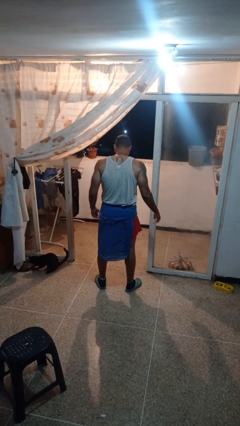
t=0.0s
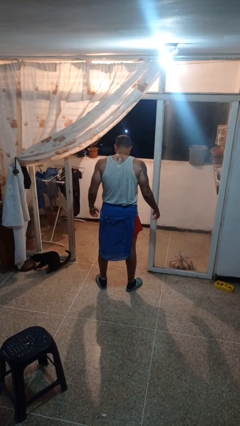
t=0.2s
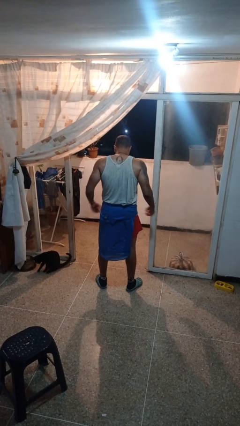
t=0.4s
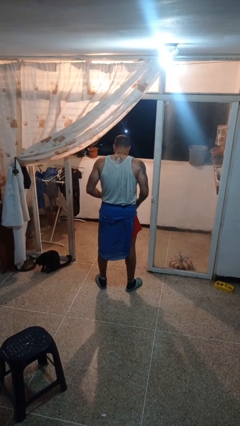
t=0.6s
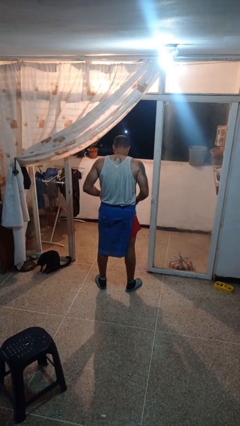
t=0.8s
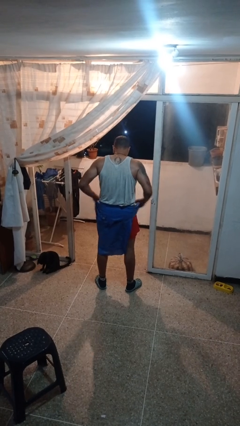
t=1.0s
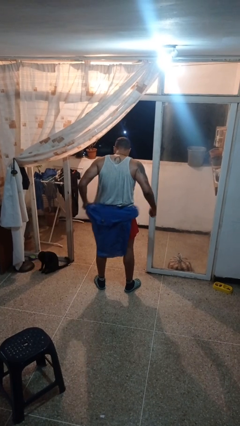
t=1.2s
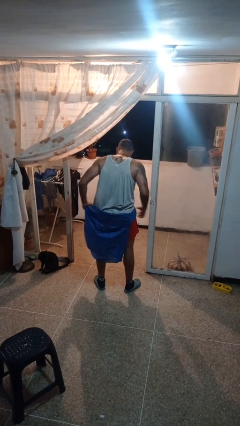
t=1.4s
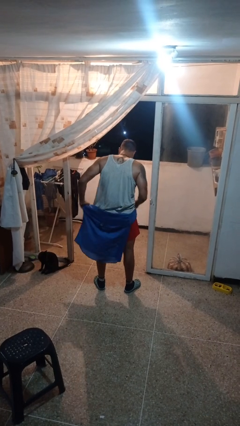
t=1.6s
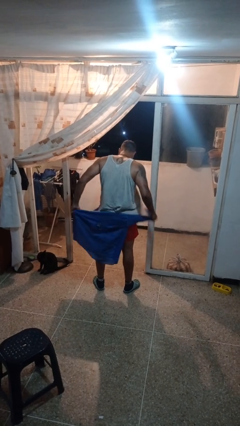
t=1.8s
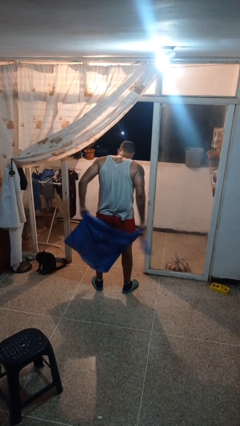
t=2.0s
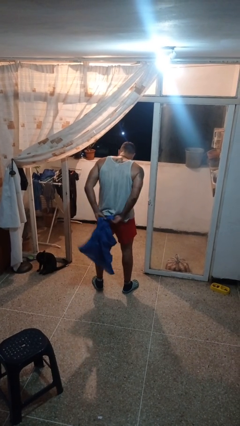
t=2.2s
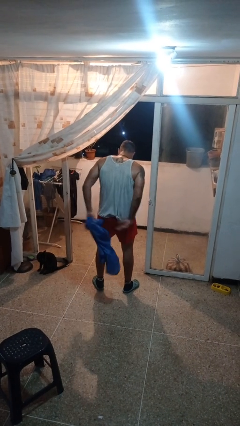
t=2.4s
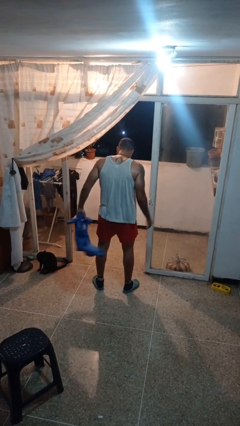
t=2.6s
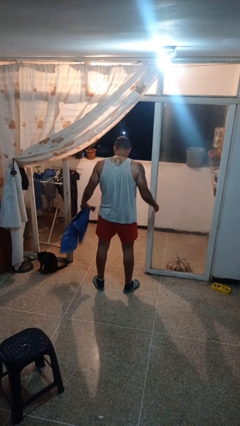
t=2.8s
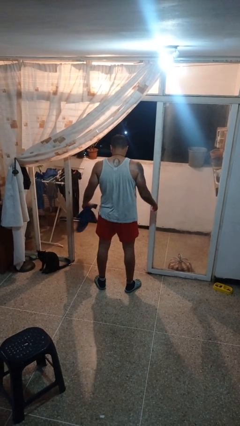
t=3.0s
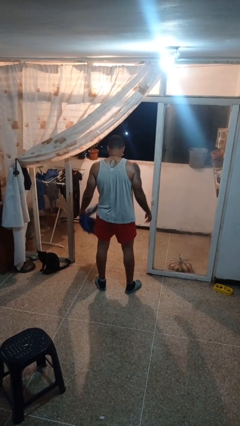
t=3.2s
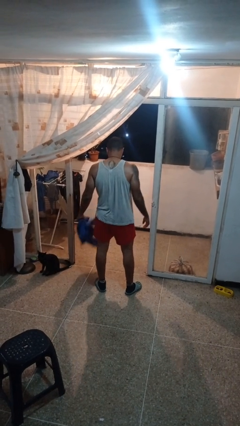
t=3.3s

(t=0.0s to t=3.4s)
person unties jacket around waist

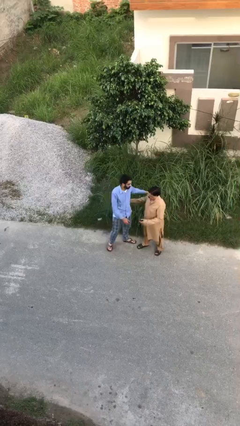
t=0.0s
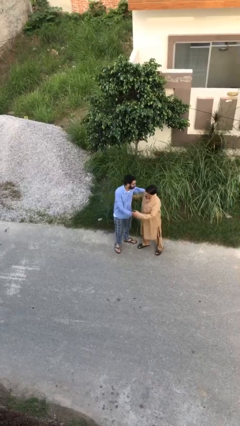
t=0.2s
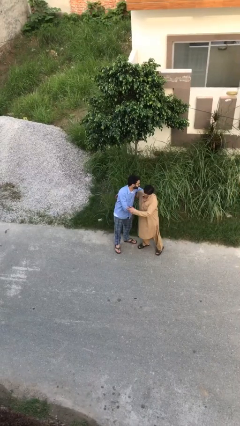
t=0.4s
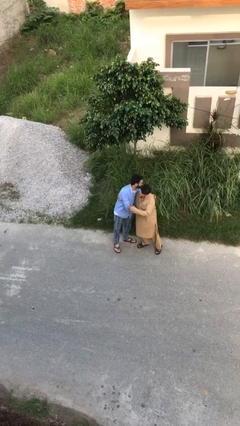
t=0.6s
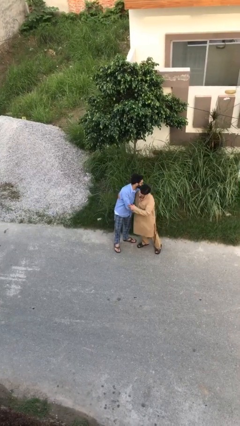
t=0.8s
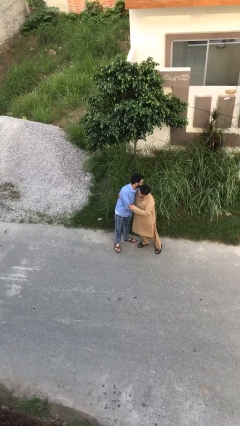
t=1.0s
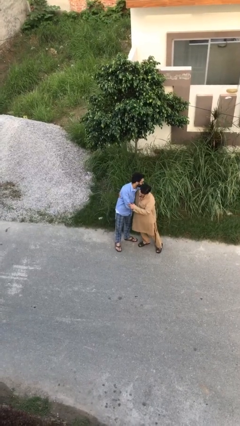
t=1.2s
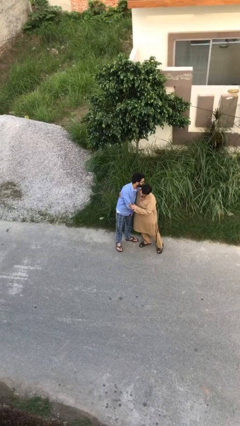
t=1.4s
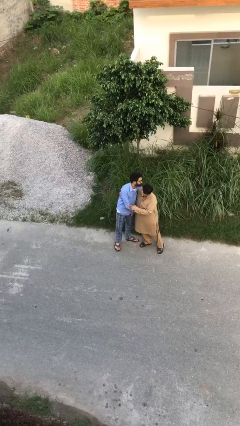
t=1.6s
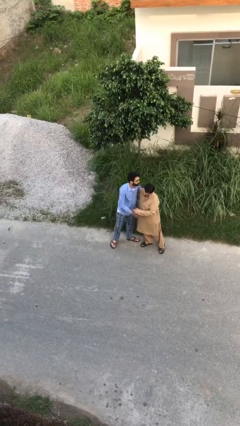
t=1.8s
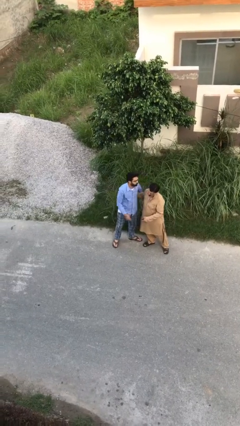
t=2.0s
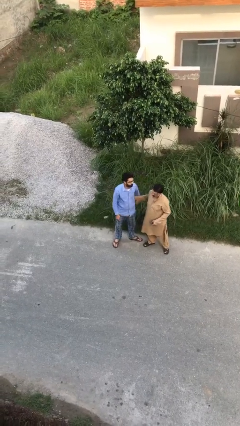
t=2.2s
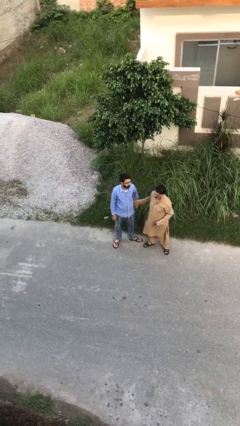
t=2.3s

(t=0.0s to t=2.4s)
person embraces person

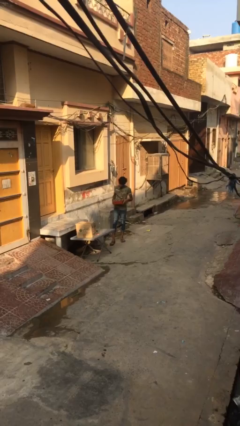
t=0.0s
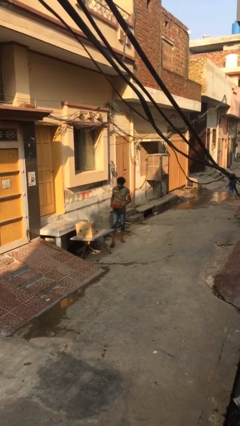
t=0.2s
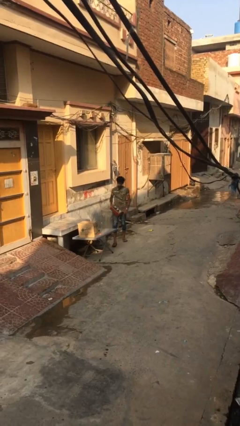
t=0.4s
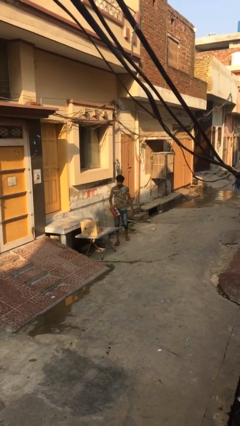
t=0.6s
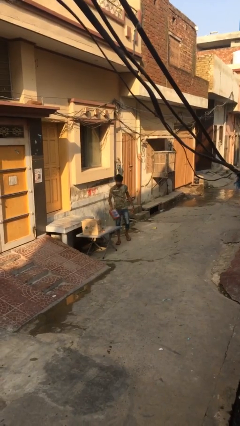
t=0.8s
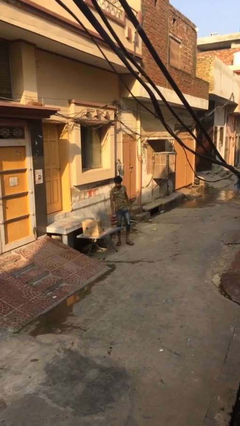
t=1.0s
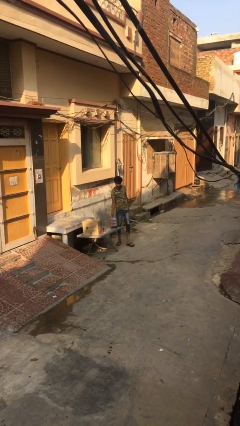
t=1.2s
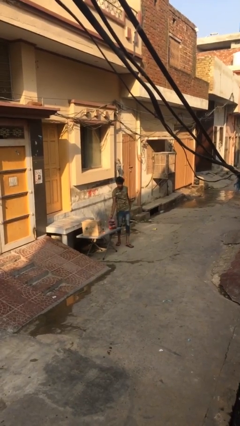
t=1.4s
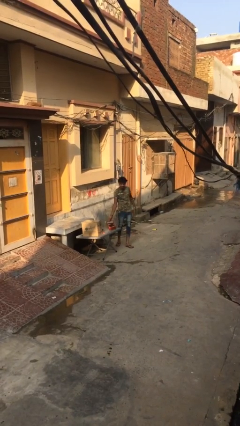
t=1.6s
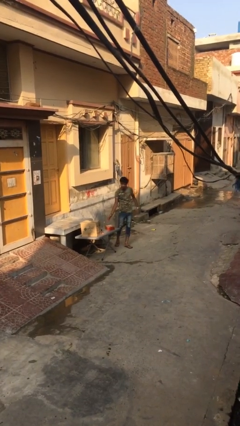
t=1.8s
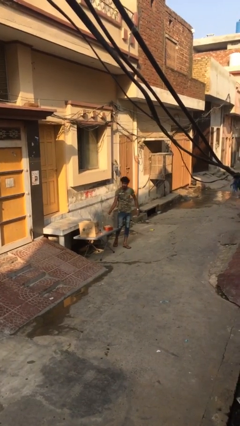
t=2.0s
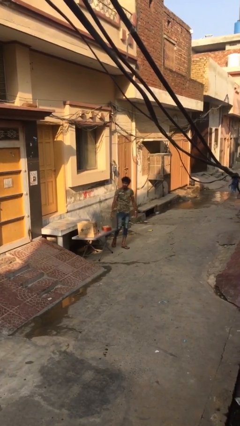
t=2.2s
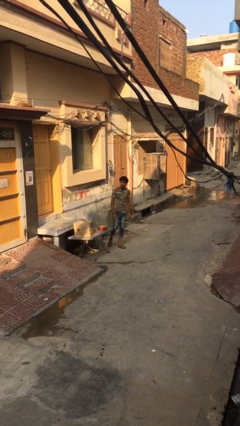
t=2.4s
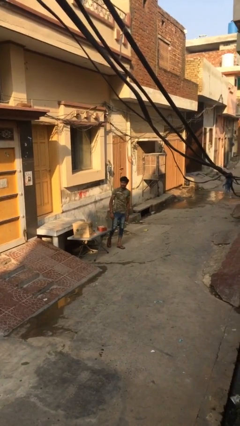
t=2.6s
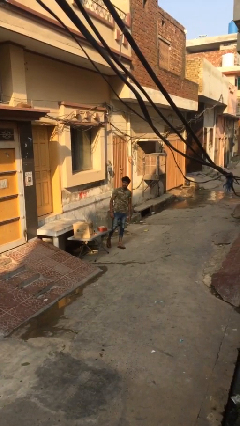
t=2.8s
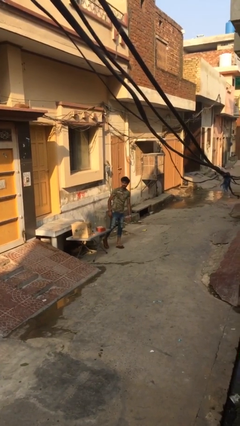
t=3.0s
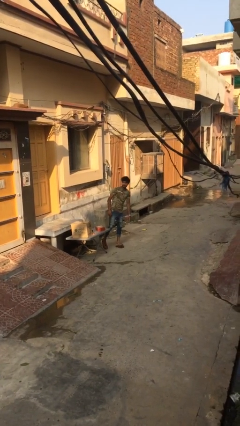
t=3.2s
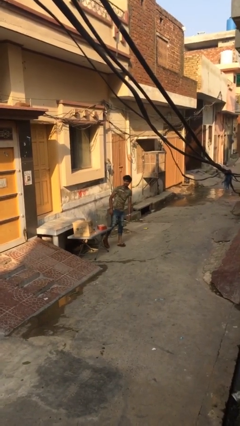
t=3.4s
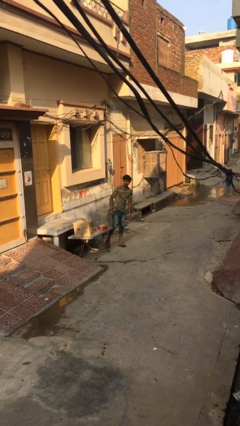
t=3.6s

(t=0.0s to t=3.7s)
person puts down object on table

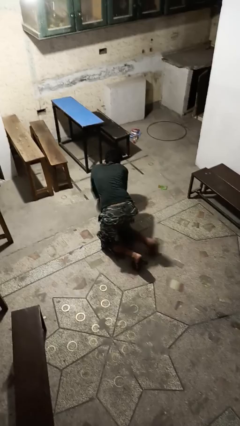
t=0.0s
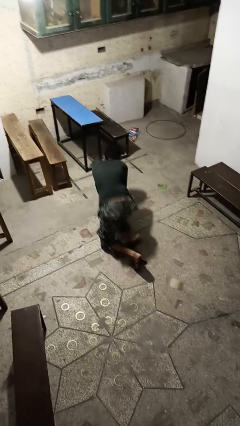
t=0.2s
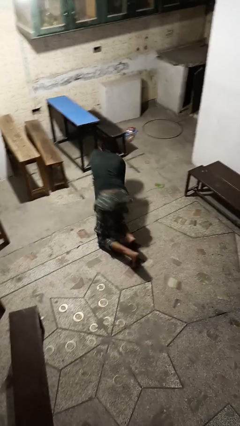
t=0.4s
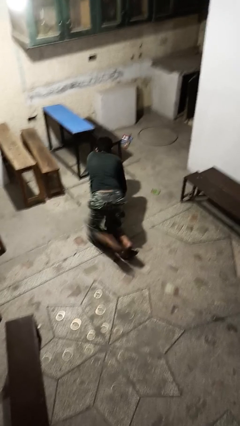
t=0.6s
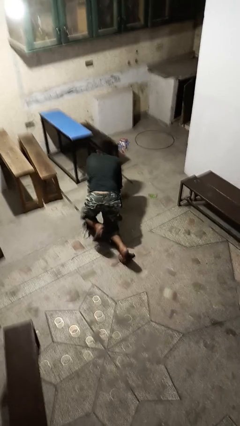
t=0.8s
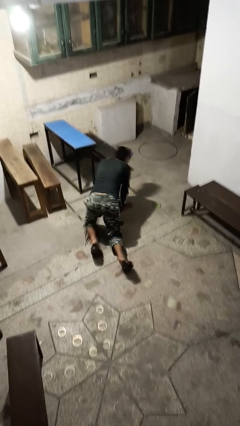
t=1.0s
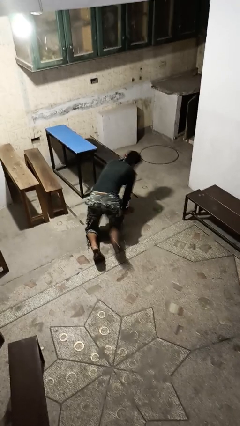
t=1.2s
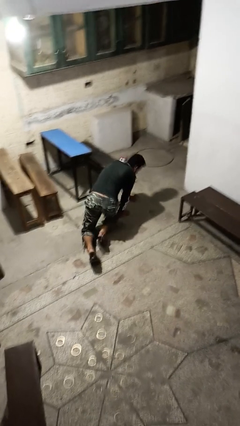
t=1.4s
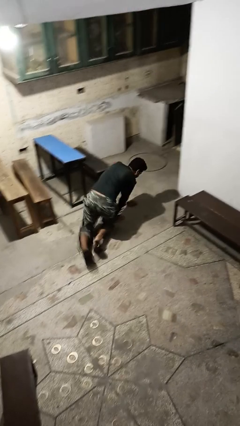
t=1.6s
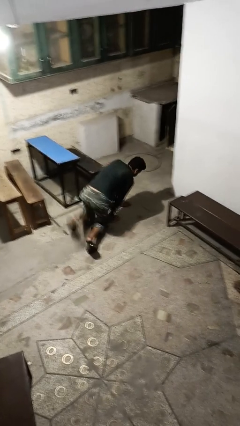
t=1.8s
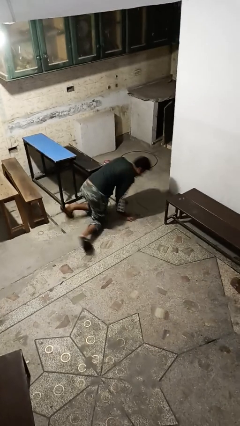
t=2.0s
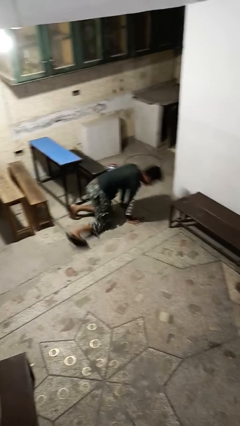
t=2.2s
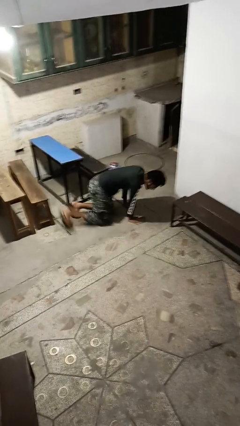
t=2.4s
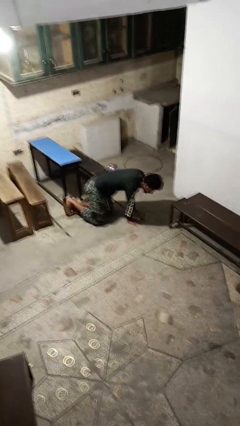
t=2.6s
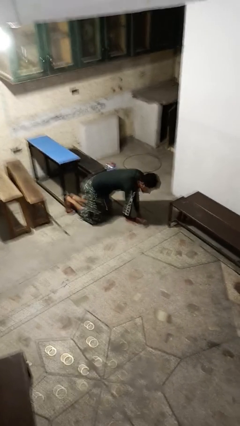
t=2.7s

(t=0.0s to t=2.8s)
person crawls

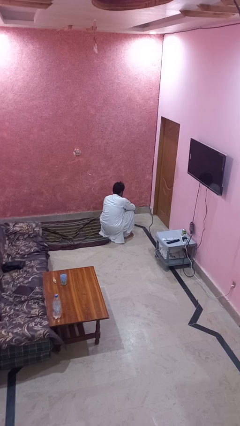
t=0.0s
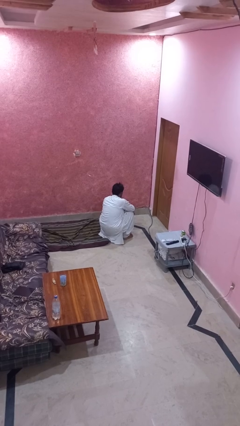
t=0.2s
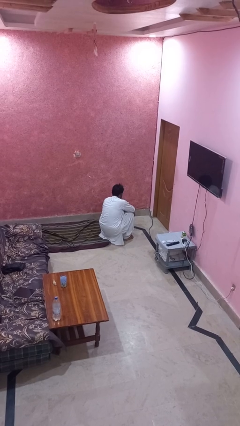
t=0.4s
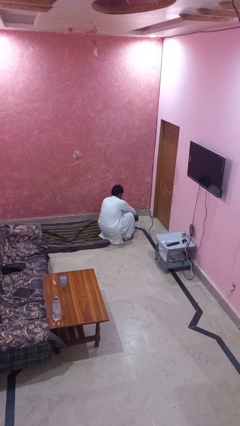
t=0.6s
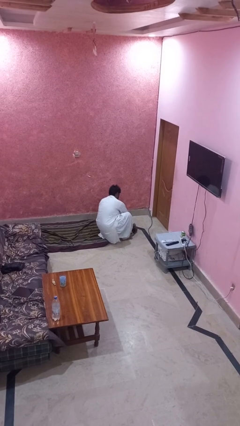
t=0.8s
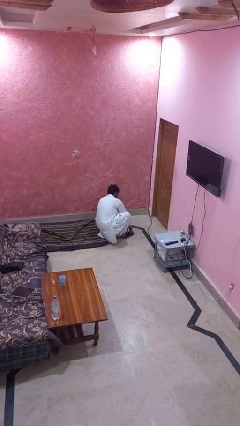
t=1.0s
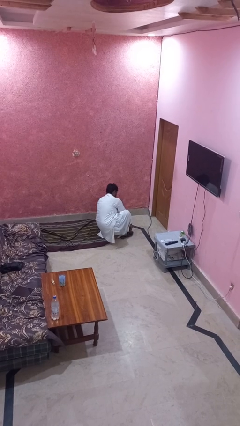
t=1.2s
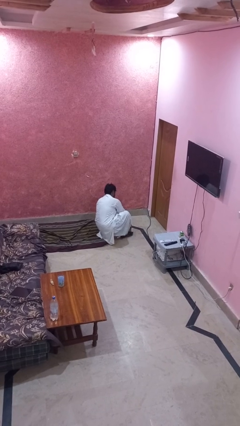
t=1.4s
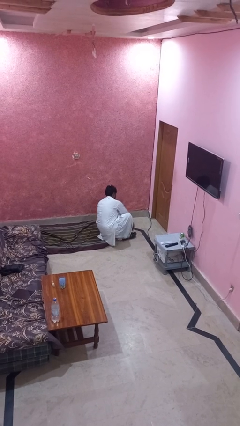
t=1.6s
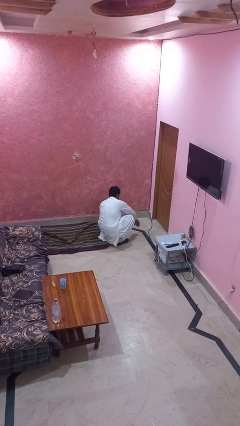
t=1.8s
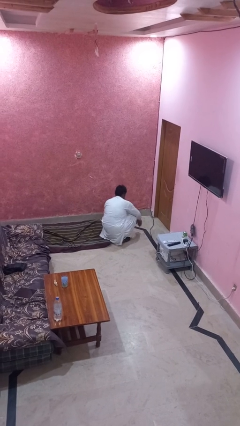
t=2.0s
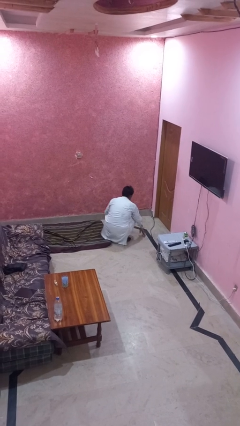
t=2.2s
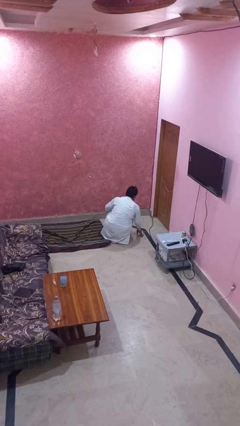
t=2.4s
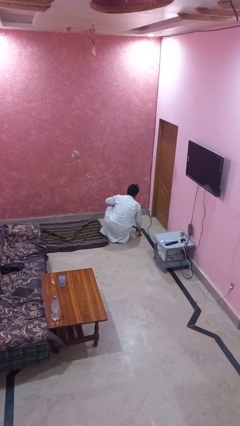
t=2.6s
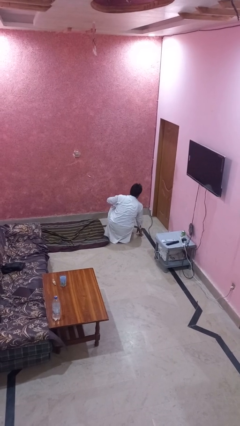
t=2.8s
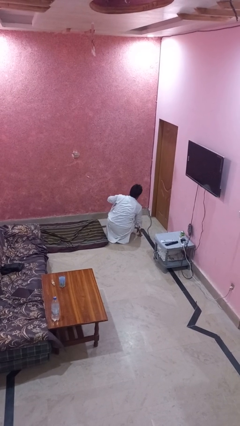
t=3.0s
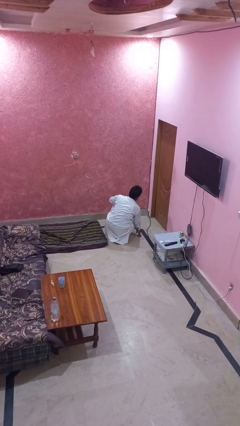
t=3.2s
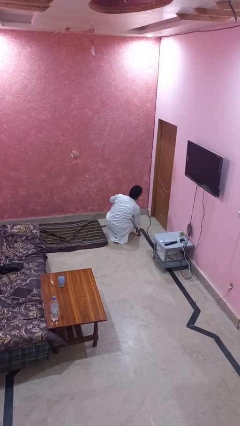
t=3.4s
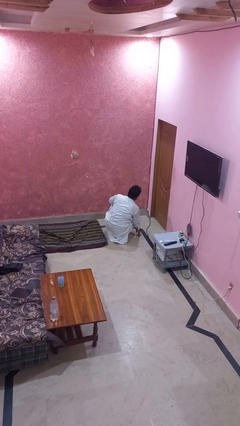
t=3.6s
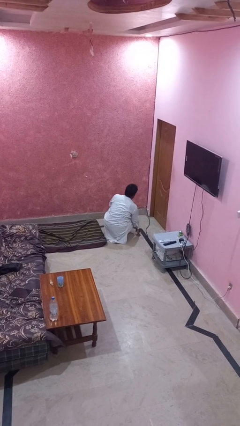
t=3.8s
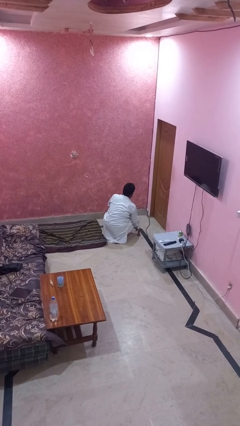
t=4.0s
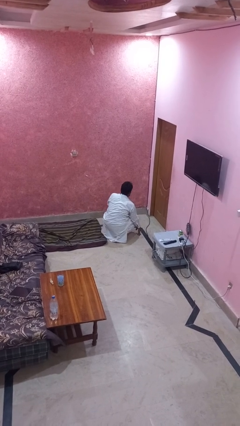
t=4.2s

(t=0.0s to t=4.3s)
person puts on shoes

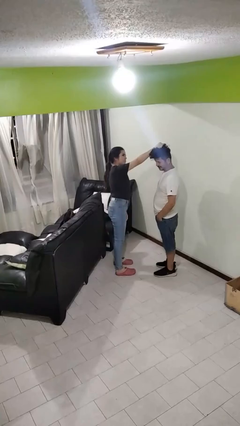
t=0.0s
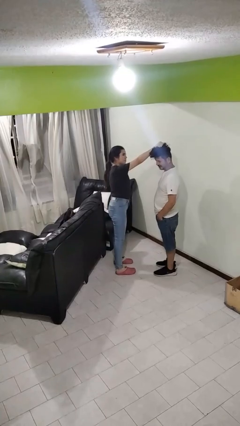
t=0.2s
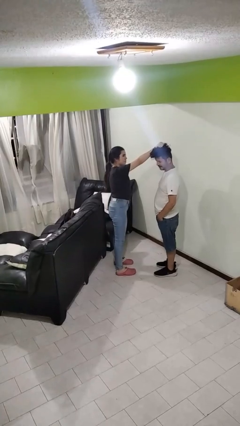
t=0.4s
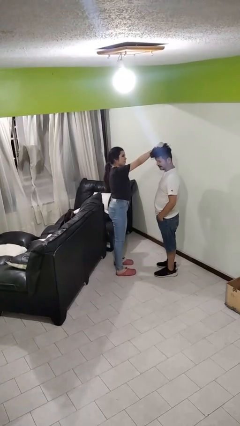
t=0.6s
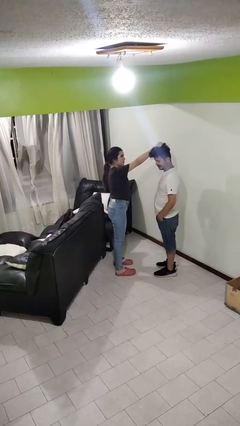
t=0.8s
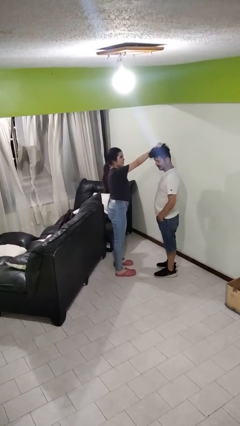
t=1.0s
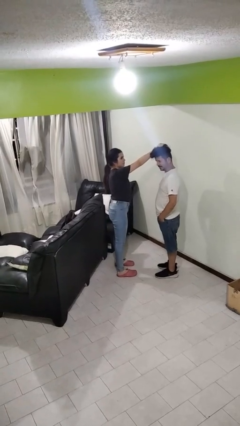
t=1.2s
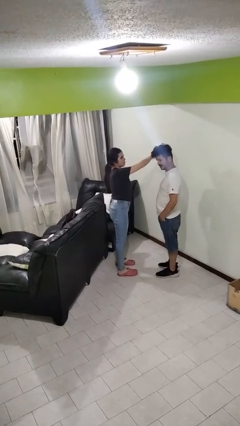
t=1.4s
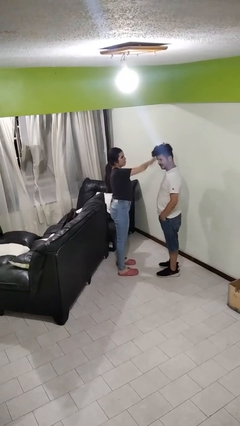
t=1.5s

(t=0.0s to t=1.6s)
person grabs person by hair
